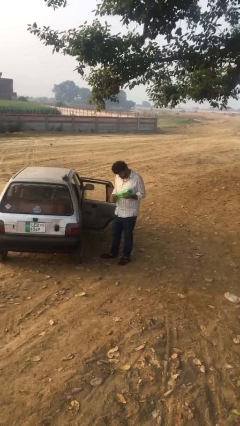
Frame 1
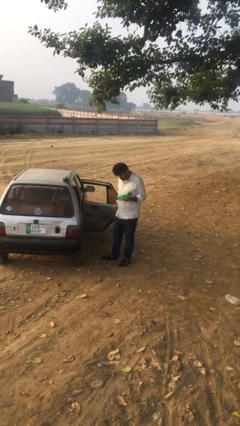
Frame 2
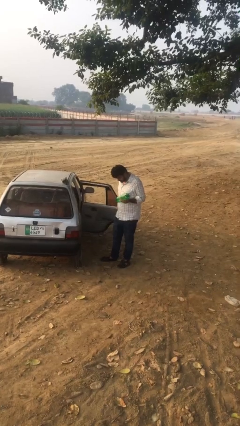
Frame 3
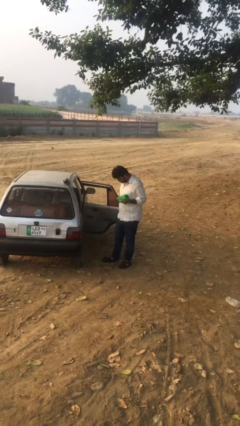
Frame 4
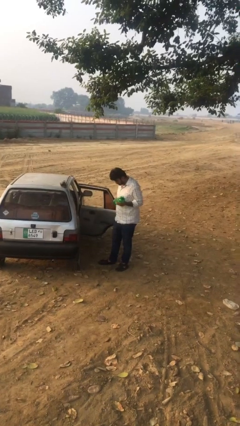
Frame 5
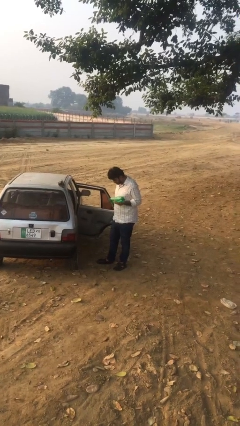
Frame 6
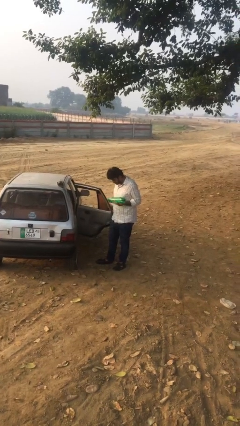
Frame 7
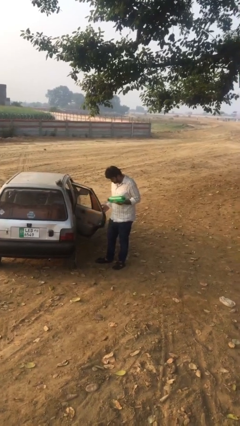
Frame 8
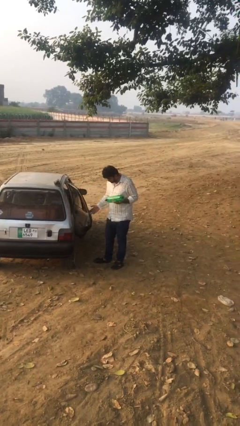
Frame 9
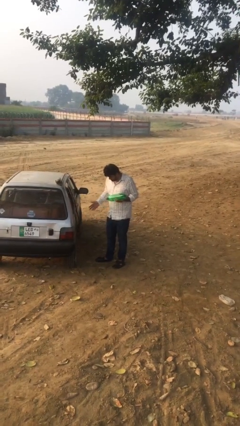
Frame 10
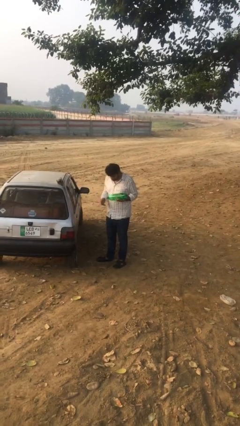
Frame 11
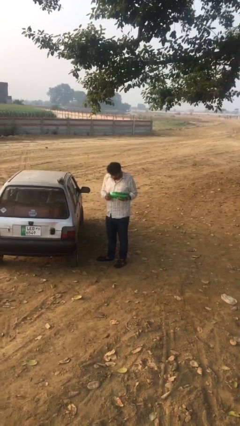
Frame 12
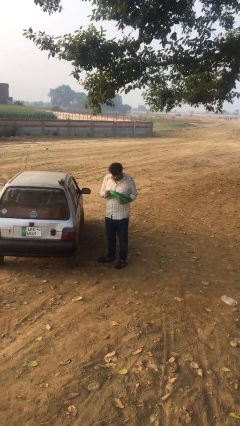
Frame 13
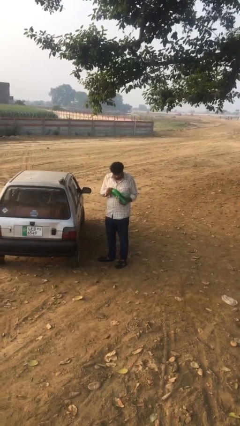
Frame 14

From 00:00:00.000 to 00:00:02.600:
person closes car door

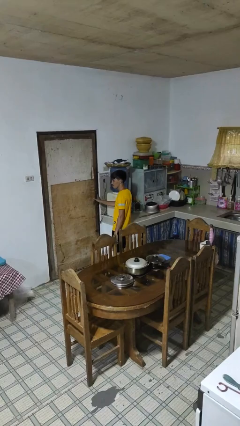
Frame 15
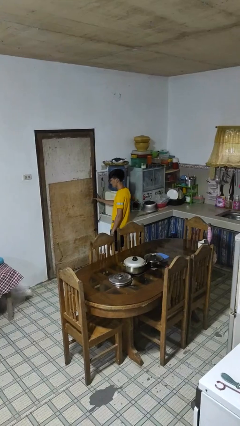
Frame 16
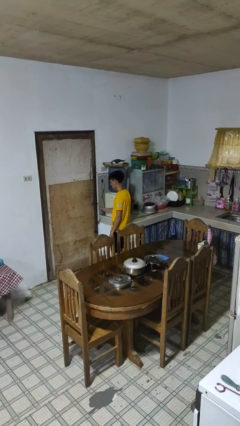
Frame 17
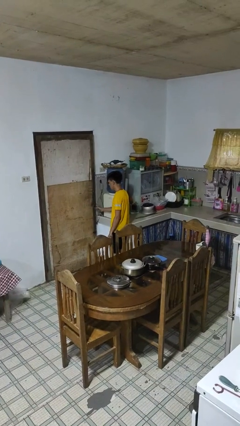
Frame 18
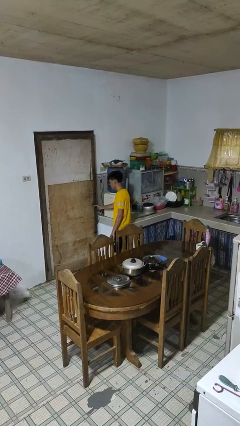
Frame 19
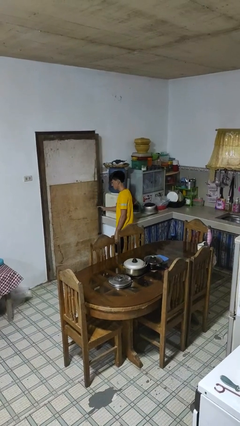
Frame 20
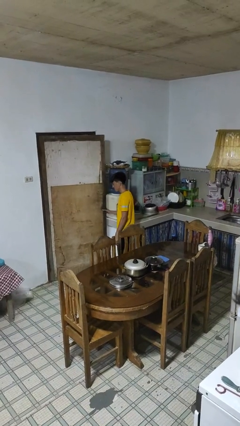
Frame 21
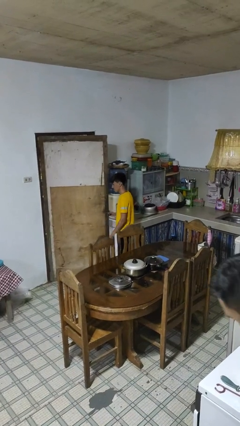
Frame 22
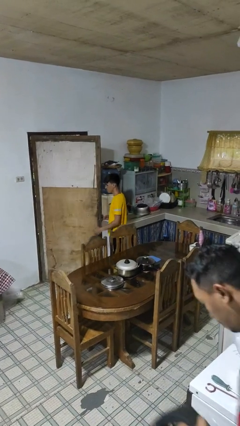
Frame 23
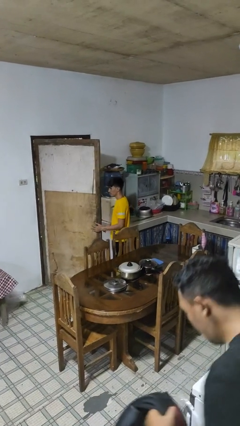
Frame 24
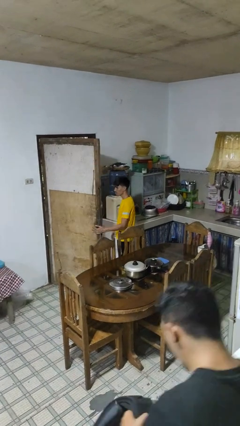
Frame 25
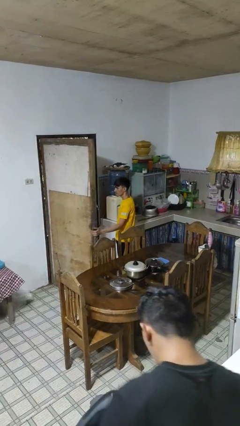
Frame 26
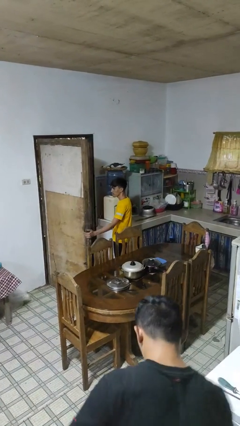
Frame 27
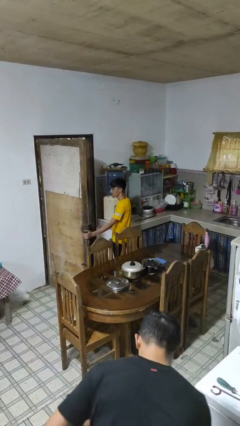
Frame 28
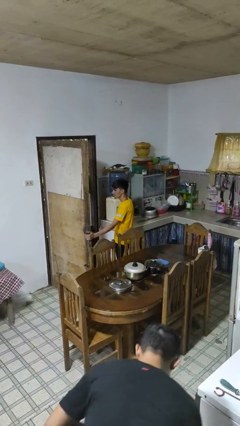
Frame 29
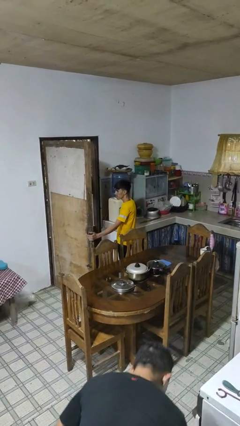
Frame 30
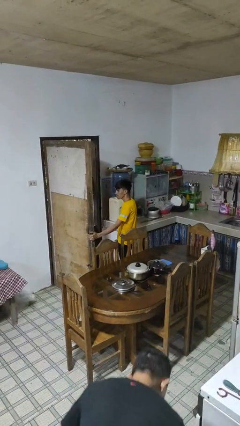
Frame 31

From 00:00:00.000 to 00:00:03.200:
person opens facility door

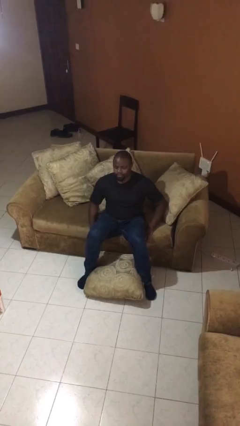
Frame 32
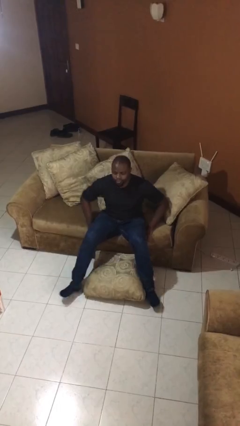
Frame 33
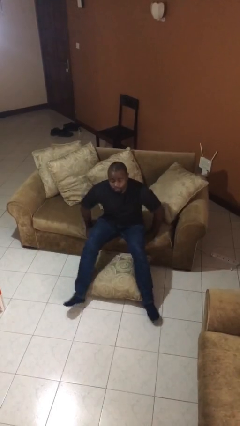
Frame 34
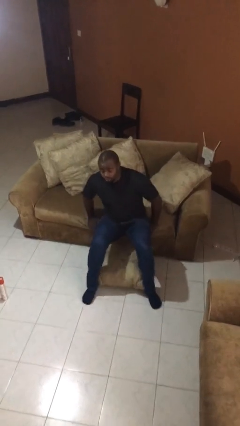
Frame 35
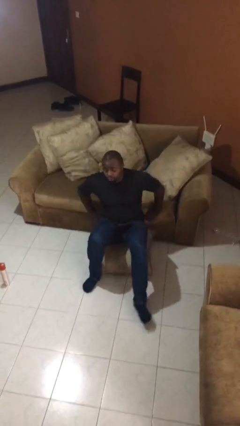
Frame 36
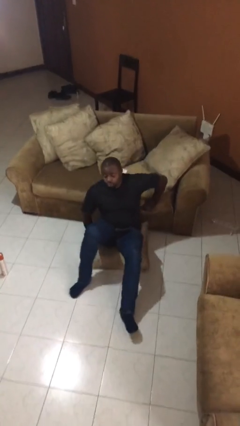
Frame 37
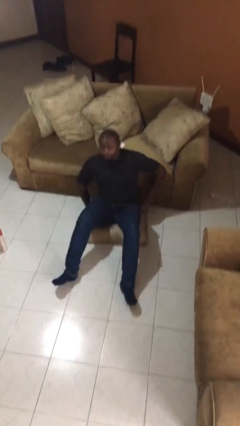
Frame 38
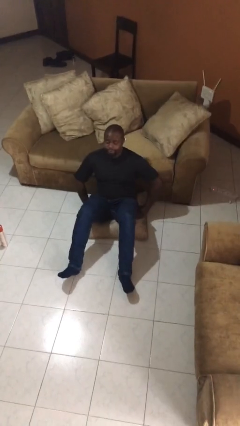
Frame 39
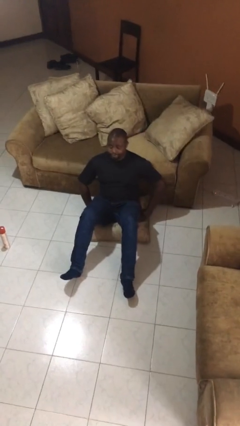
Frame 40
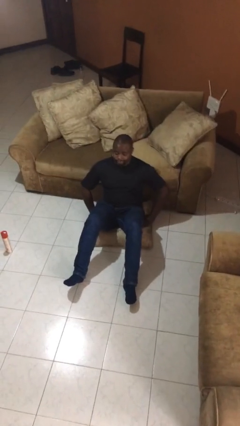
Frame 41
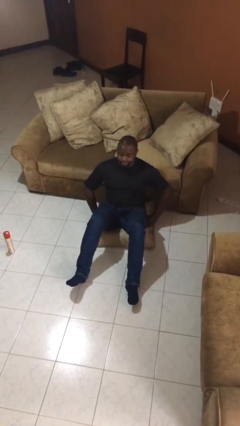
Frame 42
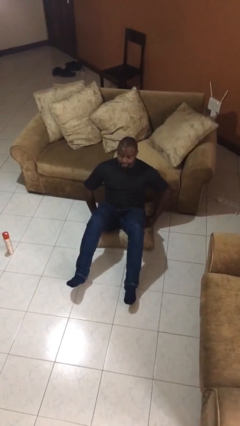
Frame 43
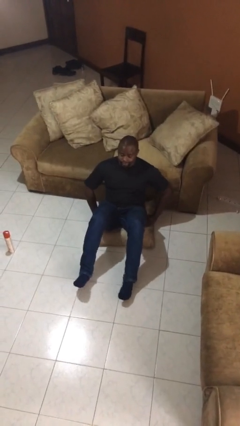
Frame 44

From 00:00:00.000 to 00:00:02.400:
person falls from chair

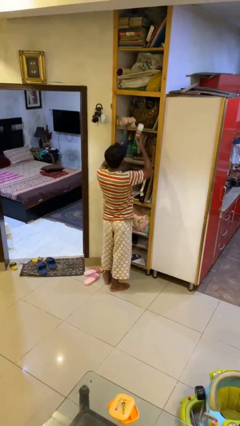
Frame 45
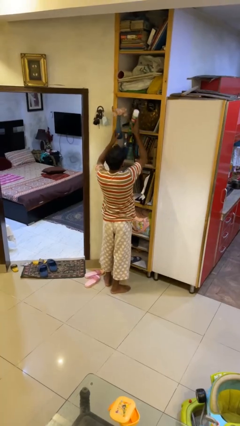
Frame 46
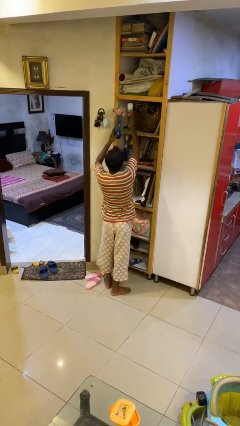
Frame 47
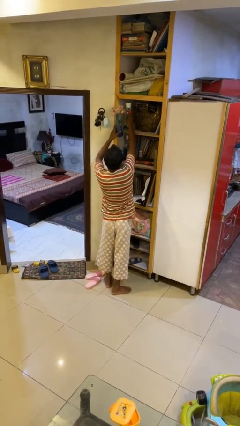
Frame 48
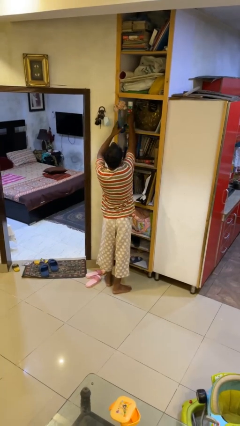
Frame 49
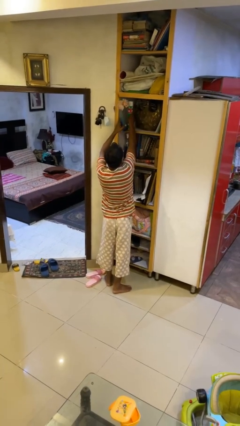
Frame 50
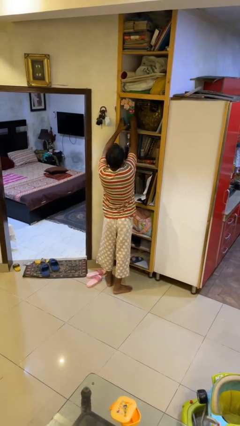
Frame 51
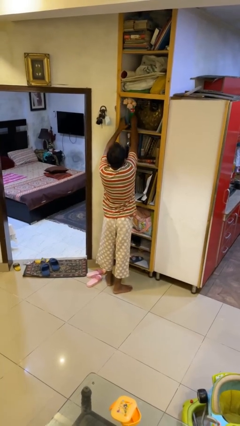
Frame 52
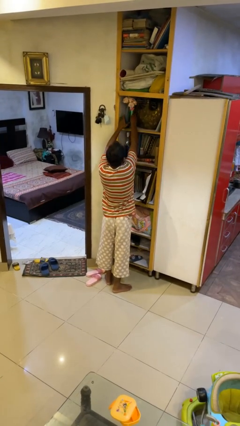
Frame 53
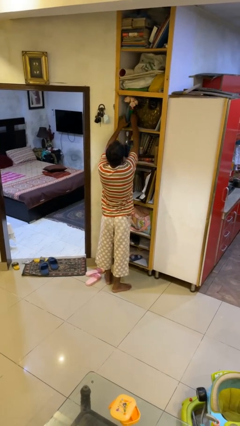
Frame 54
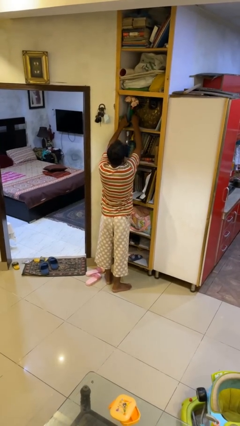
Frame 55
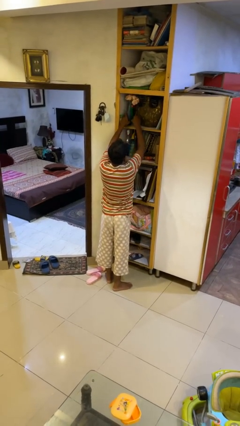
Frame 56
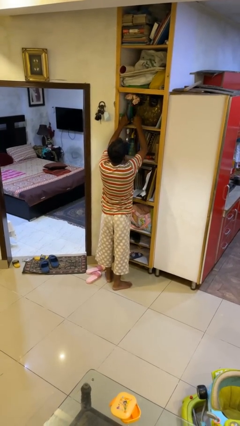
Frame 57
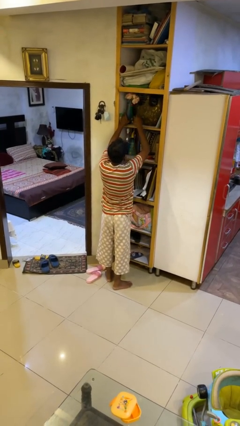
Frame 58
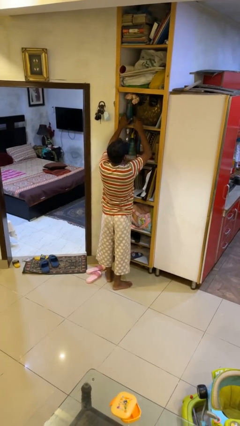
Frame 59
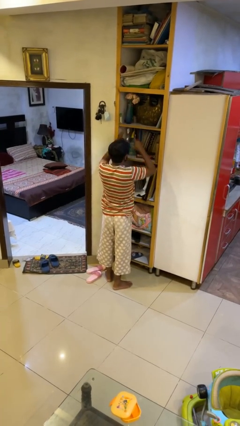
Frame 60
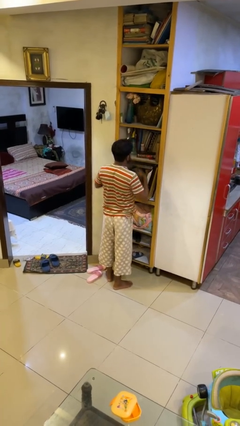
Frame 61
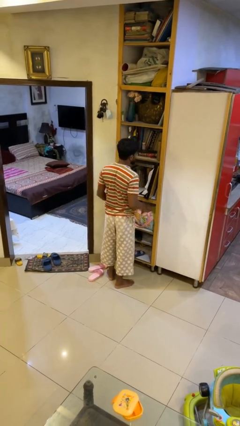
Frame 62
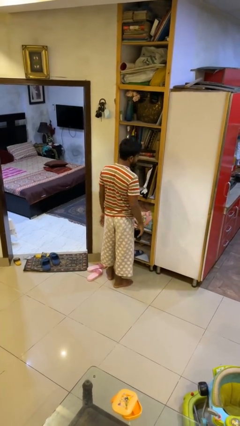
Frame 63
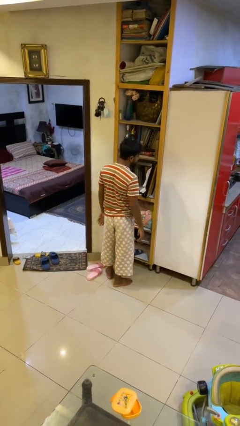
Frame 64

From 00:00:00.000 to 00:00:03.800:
person puts down object on shelf

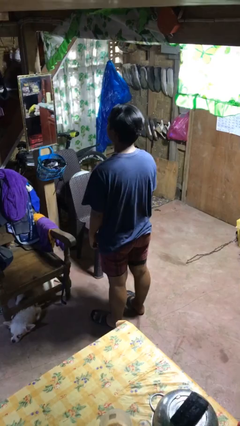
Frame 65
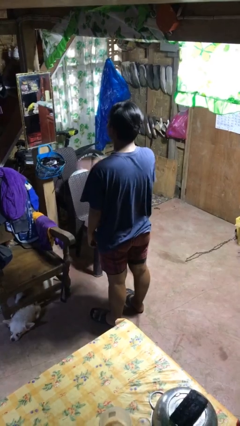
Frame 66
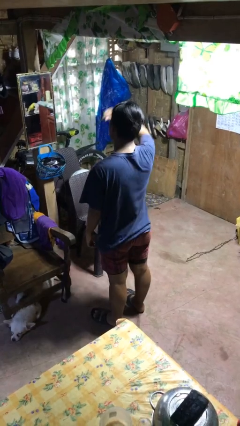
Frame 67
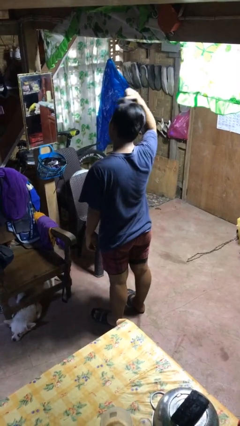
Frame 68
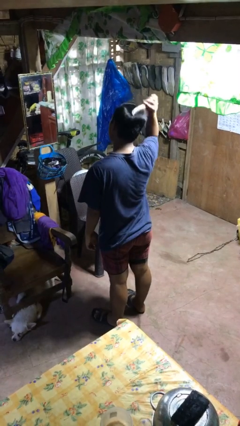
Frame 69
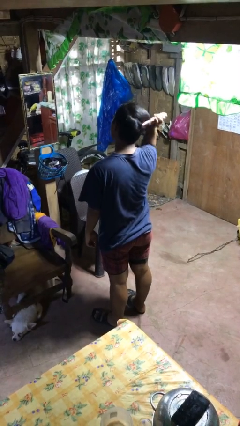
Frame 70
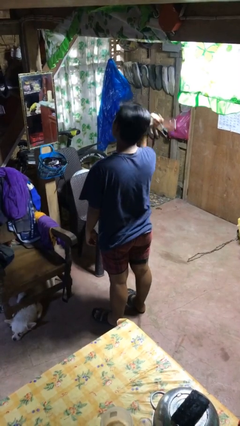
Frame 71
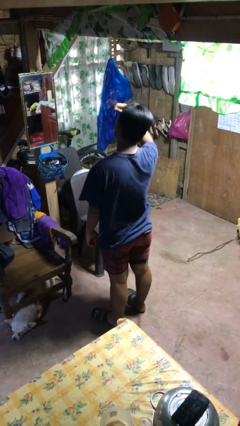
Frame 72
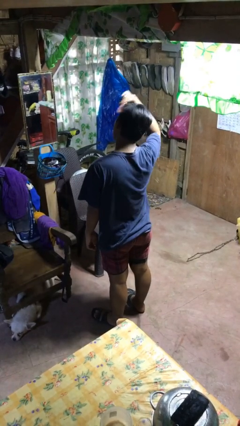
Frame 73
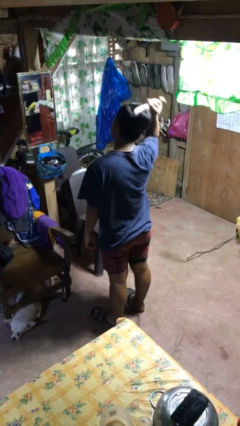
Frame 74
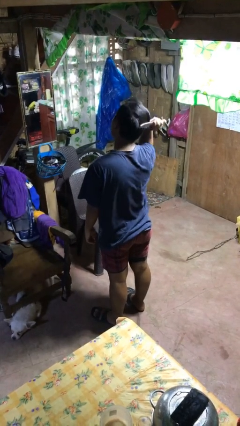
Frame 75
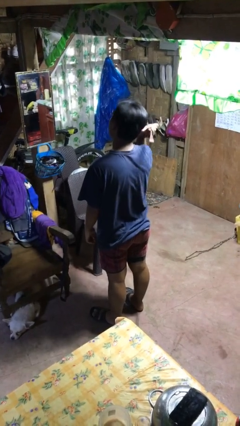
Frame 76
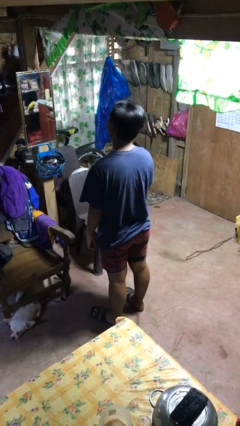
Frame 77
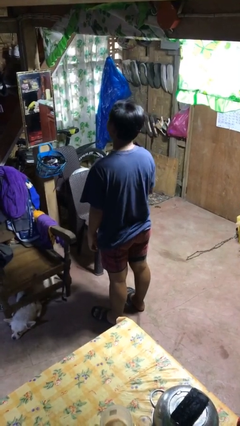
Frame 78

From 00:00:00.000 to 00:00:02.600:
person brushes hair

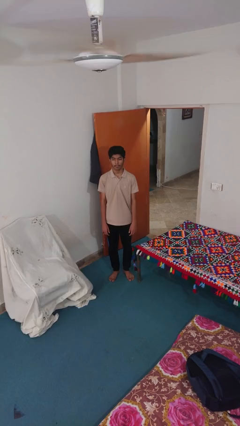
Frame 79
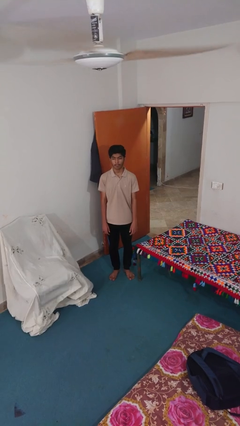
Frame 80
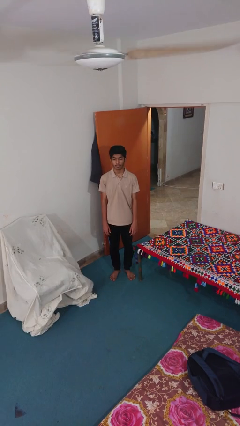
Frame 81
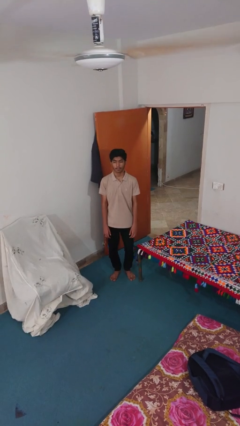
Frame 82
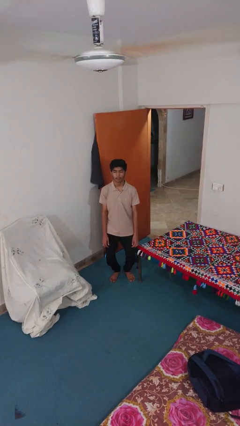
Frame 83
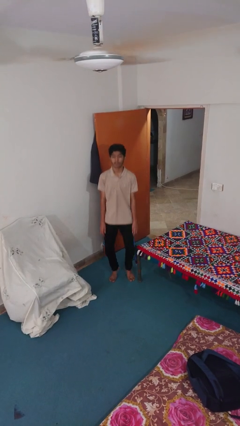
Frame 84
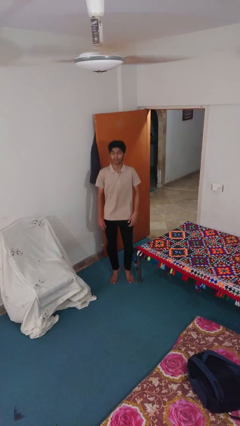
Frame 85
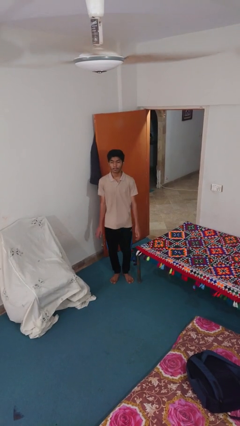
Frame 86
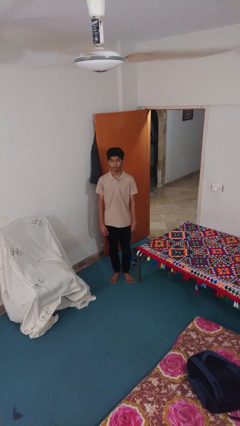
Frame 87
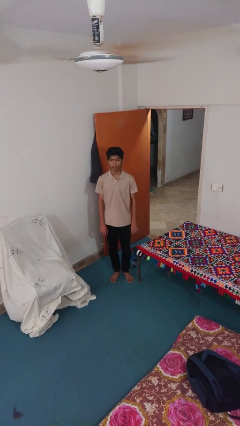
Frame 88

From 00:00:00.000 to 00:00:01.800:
person jumps

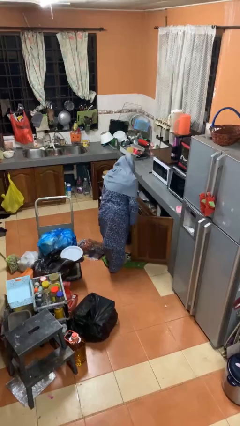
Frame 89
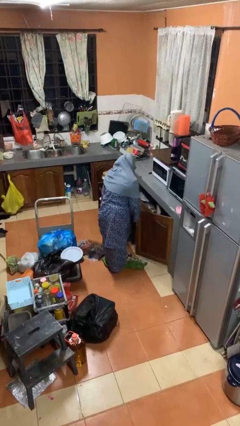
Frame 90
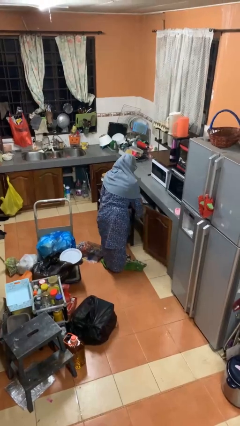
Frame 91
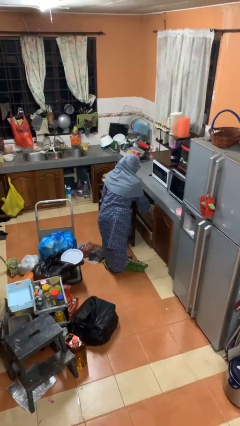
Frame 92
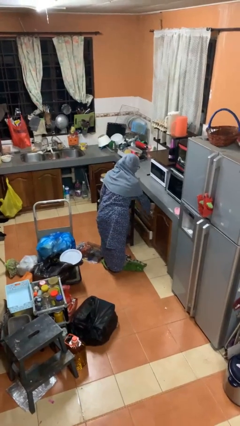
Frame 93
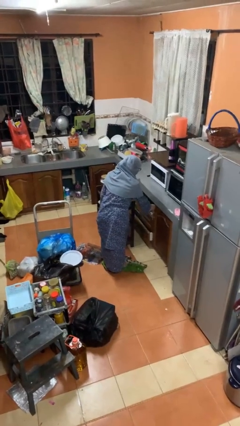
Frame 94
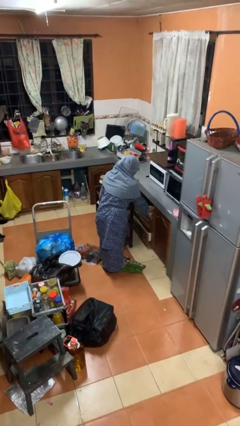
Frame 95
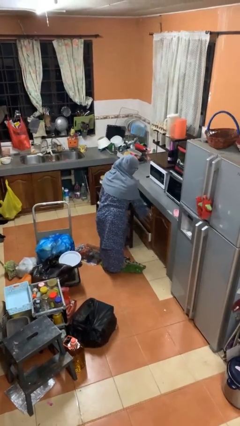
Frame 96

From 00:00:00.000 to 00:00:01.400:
person closes cabinet
